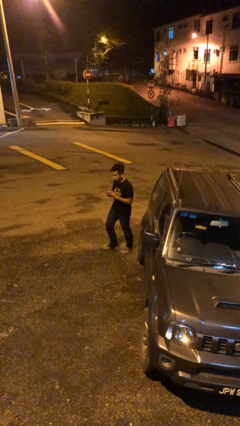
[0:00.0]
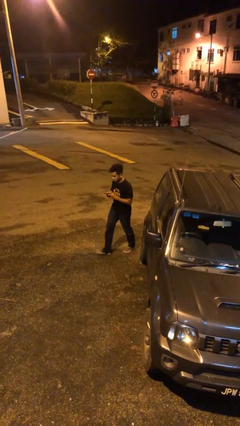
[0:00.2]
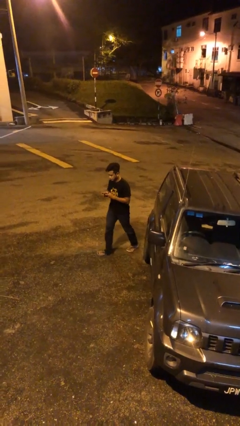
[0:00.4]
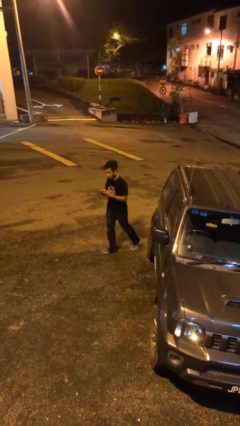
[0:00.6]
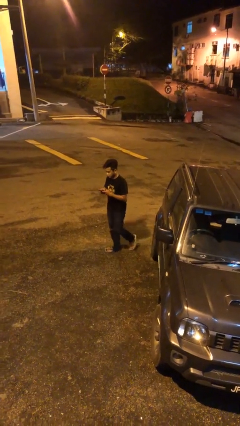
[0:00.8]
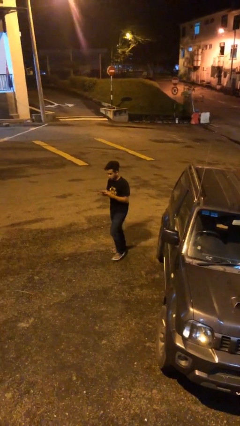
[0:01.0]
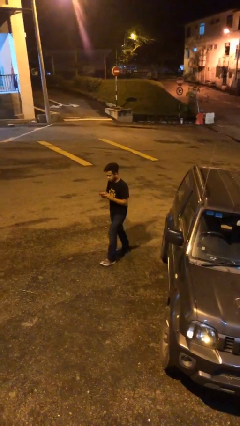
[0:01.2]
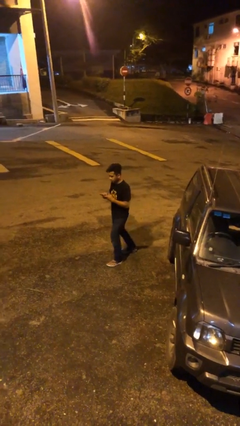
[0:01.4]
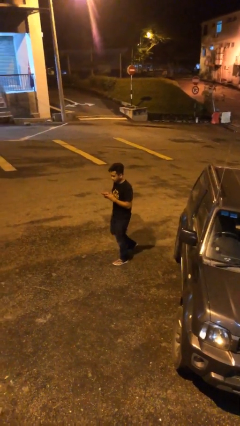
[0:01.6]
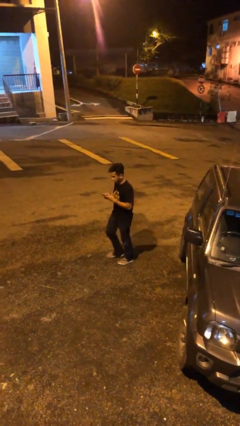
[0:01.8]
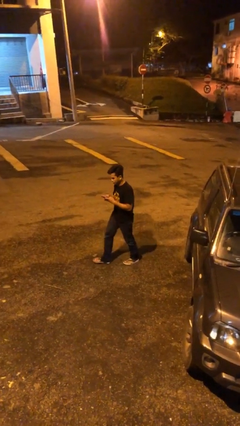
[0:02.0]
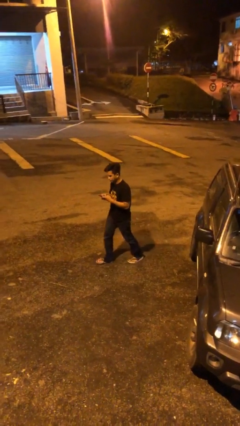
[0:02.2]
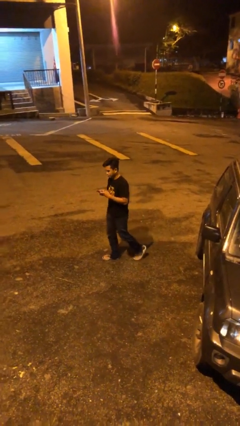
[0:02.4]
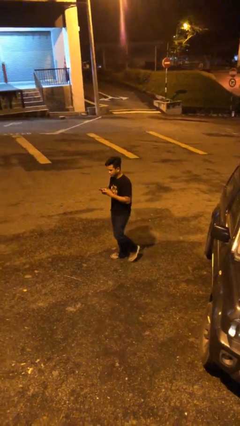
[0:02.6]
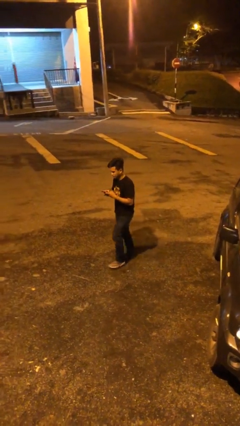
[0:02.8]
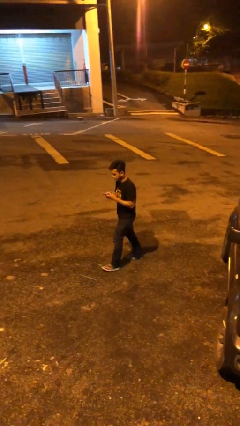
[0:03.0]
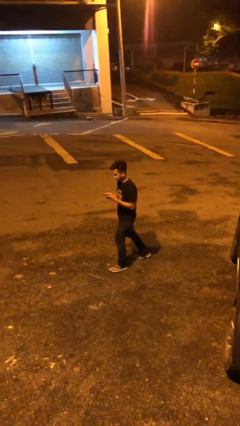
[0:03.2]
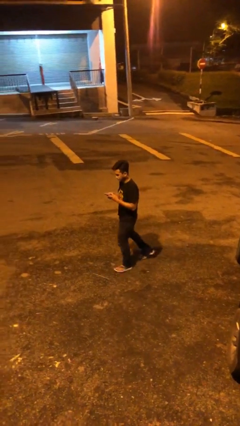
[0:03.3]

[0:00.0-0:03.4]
person texts on phone

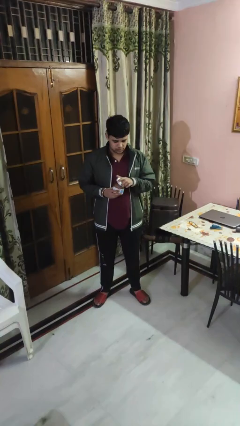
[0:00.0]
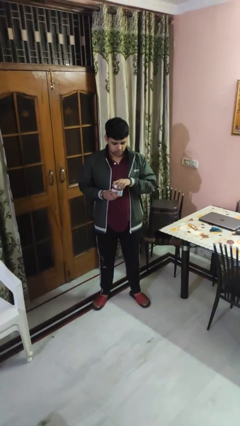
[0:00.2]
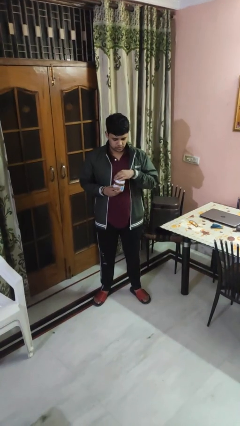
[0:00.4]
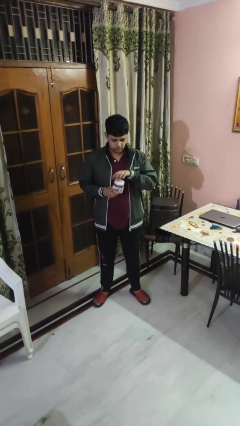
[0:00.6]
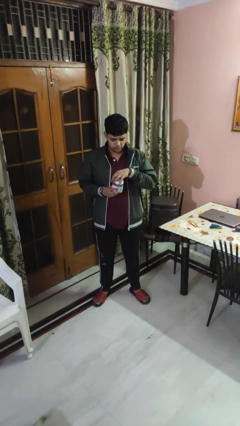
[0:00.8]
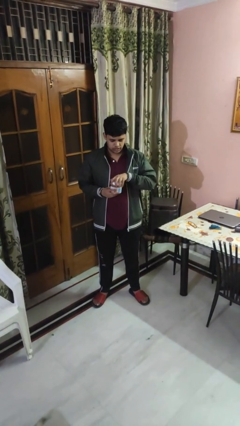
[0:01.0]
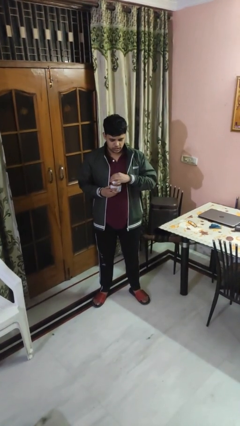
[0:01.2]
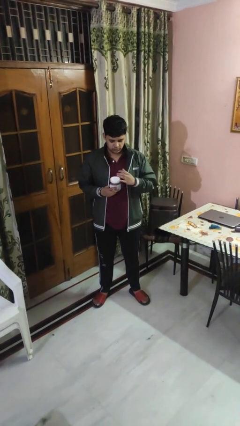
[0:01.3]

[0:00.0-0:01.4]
person closes jar

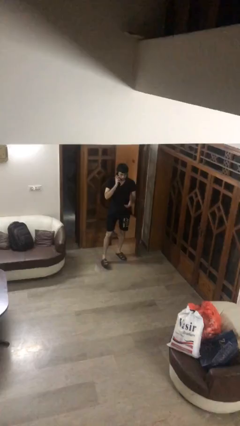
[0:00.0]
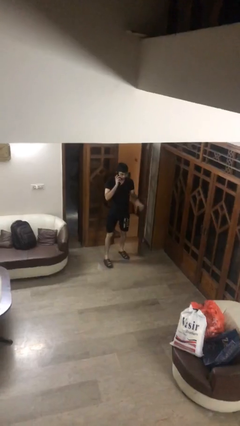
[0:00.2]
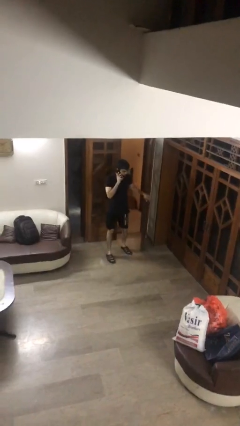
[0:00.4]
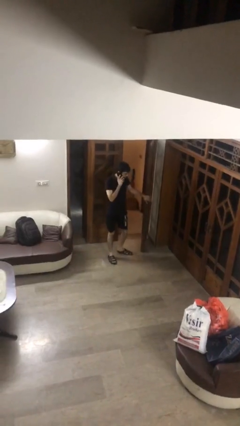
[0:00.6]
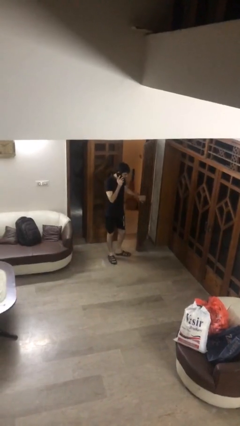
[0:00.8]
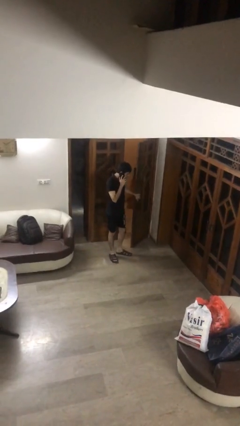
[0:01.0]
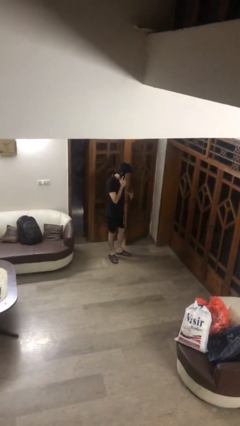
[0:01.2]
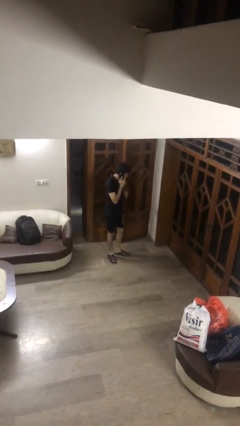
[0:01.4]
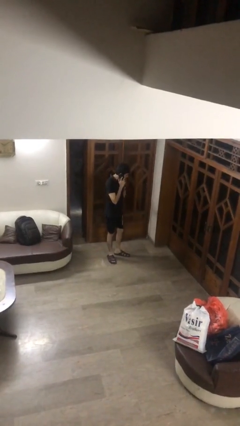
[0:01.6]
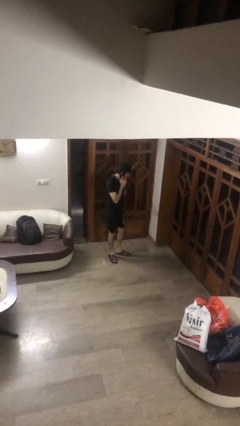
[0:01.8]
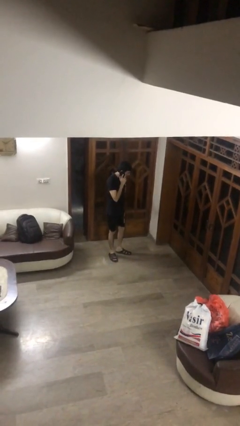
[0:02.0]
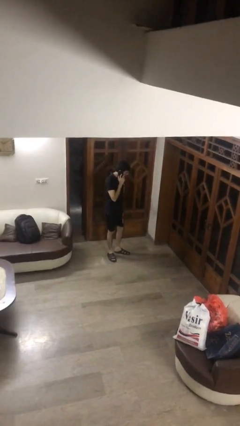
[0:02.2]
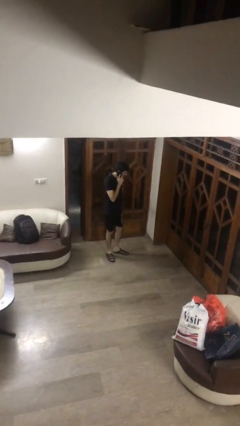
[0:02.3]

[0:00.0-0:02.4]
person closes facility door

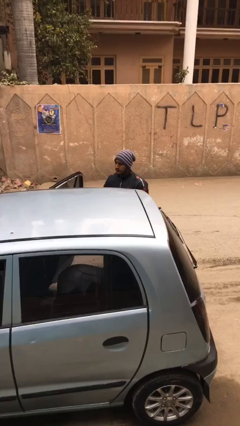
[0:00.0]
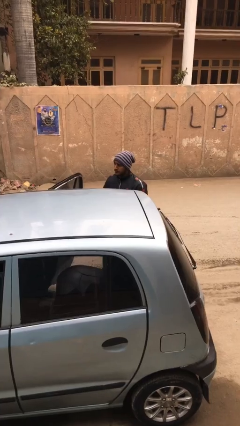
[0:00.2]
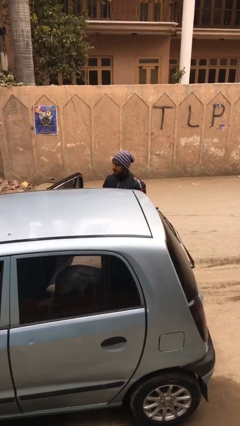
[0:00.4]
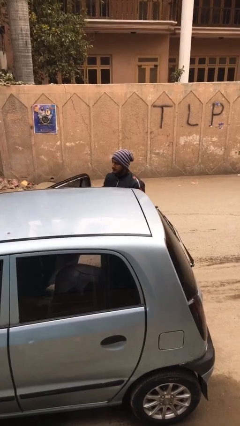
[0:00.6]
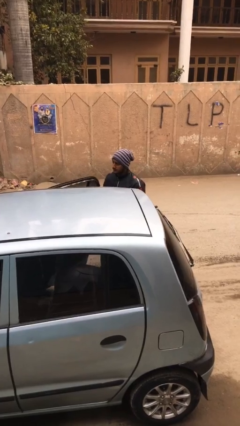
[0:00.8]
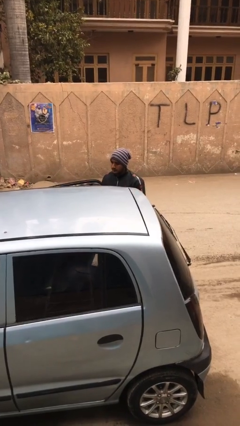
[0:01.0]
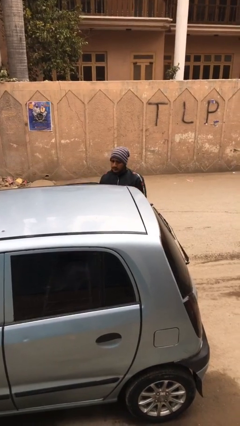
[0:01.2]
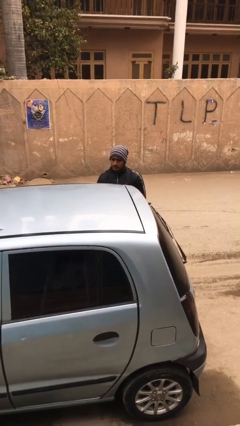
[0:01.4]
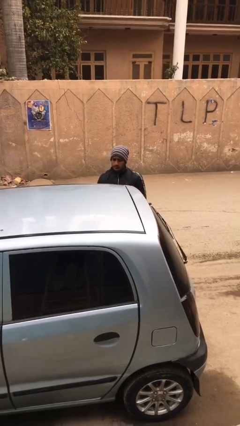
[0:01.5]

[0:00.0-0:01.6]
person closes car door

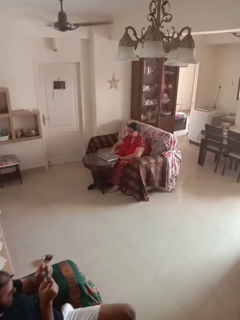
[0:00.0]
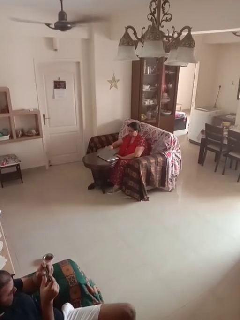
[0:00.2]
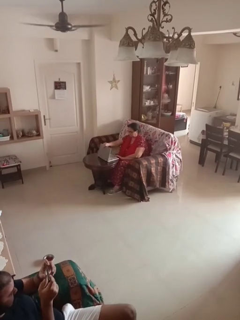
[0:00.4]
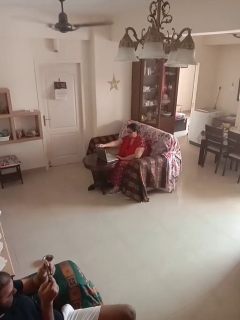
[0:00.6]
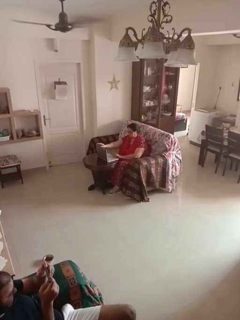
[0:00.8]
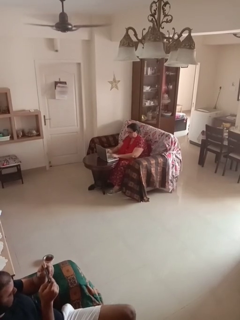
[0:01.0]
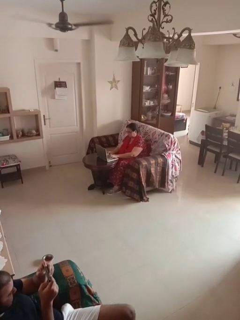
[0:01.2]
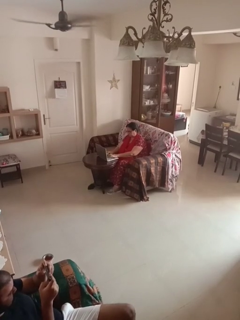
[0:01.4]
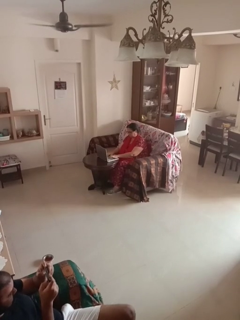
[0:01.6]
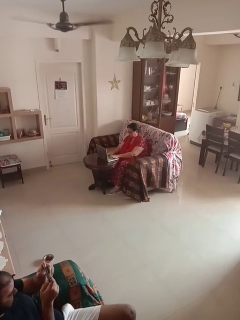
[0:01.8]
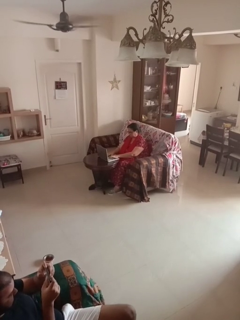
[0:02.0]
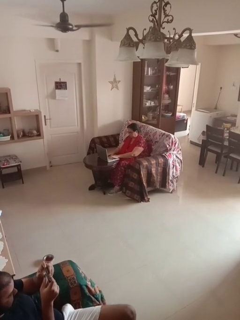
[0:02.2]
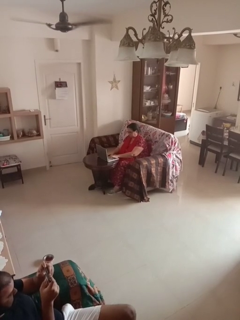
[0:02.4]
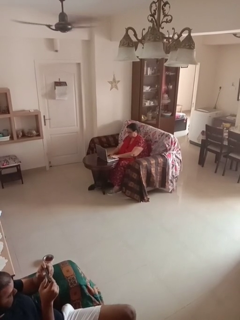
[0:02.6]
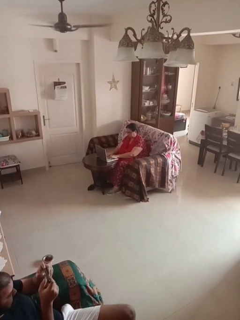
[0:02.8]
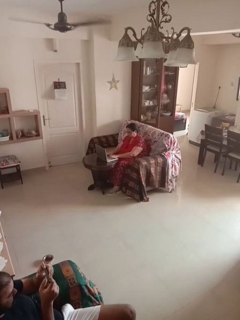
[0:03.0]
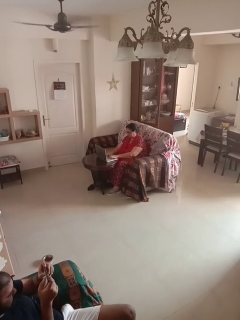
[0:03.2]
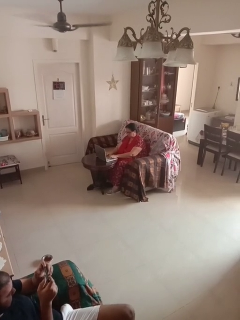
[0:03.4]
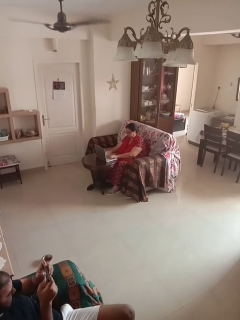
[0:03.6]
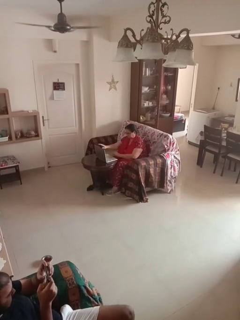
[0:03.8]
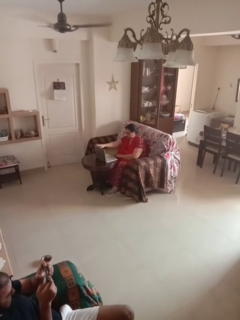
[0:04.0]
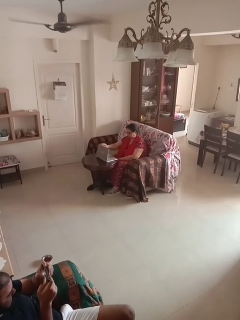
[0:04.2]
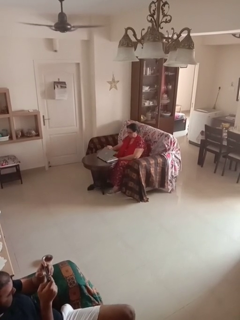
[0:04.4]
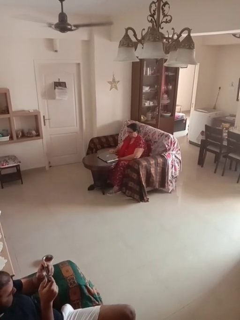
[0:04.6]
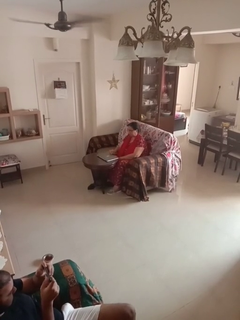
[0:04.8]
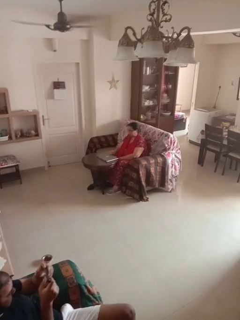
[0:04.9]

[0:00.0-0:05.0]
person interacts with laptop

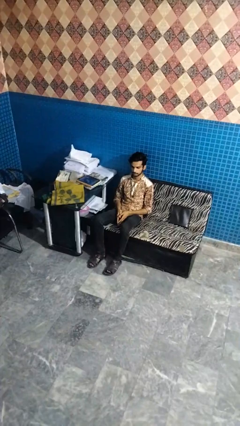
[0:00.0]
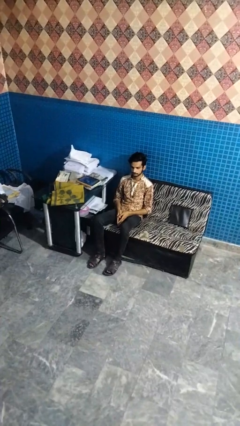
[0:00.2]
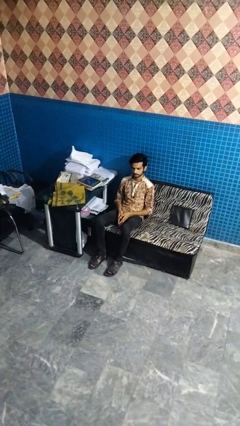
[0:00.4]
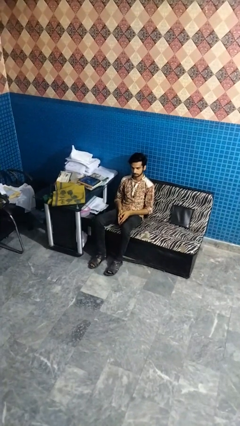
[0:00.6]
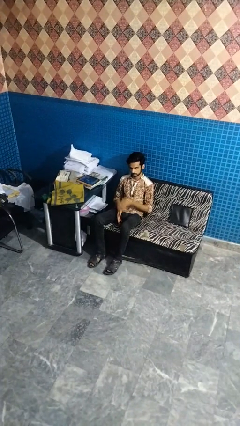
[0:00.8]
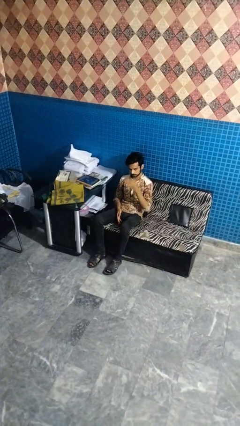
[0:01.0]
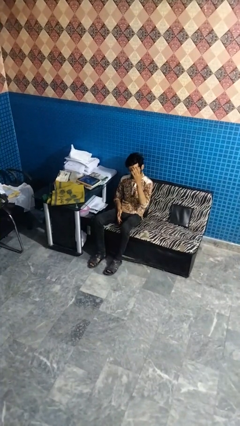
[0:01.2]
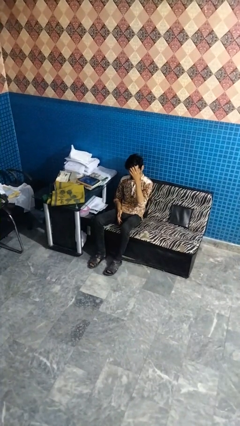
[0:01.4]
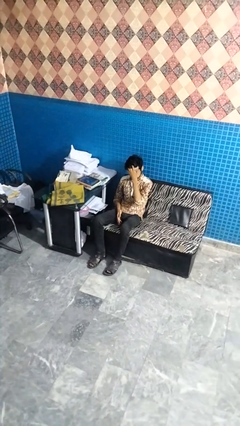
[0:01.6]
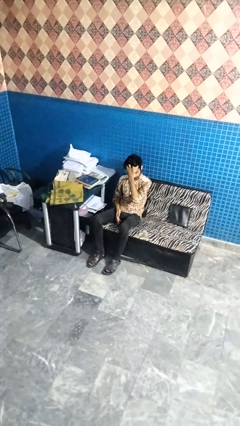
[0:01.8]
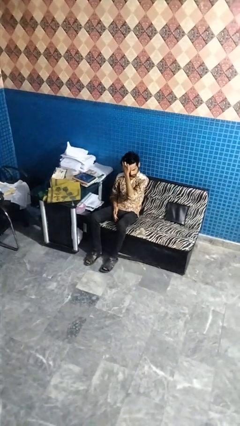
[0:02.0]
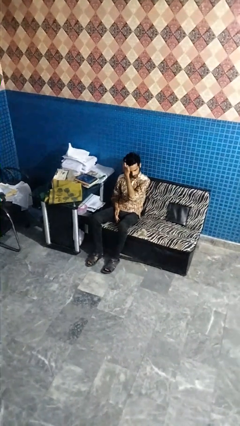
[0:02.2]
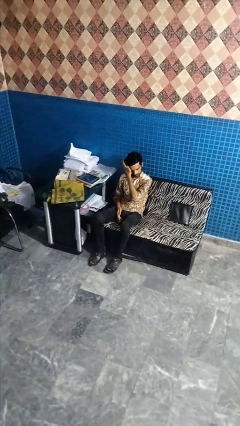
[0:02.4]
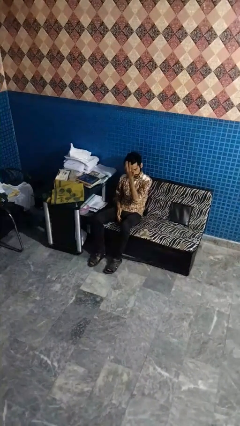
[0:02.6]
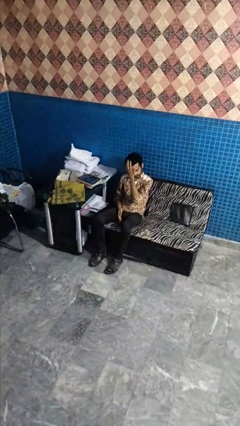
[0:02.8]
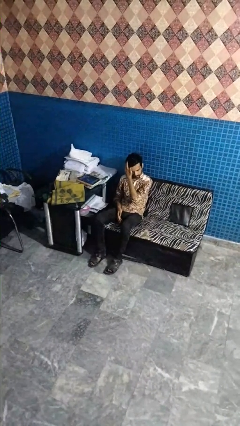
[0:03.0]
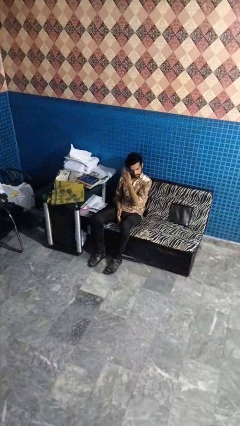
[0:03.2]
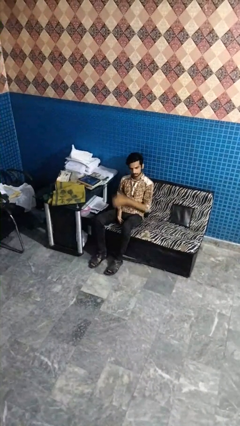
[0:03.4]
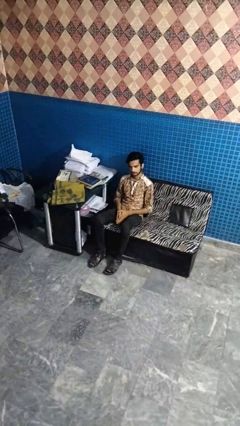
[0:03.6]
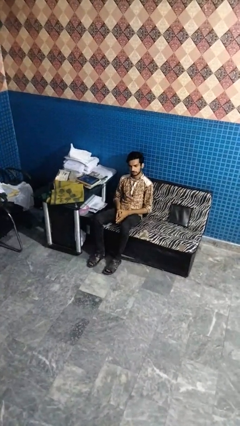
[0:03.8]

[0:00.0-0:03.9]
person strokes hair

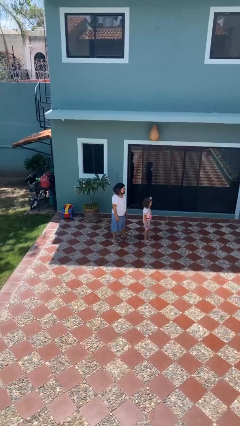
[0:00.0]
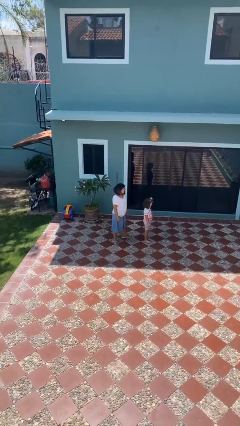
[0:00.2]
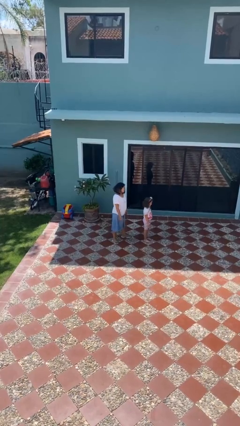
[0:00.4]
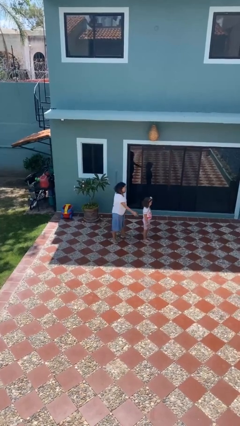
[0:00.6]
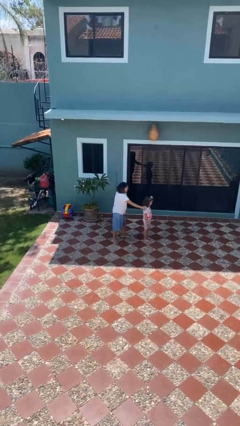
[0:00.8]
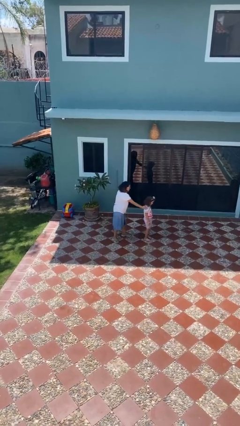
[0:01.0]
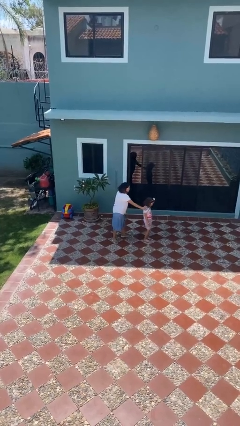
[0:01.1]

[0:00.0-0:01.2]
person grabs person by shoulder
